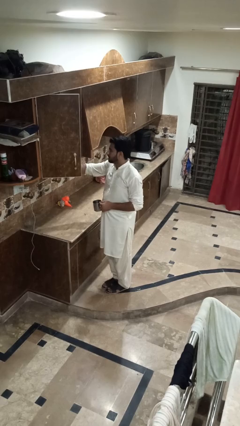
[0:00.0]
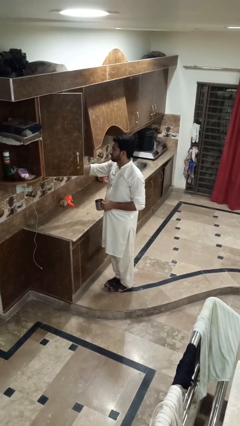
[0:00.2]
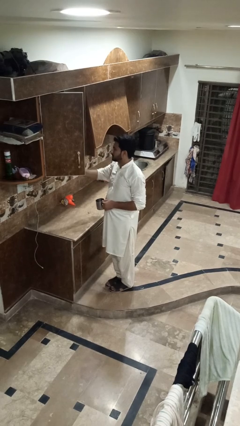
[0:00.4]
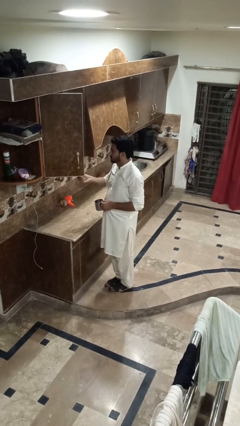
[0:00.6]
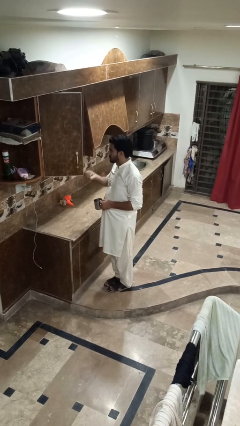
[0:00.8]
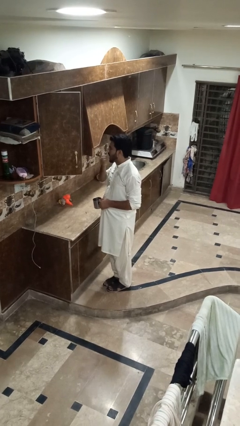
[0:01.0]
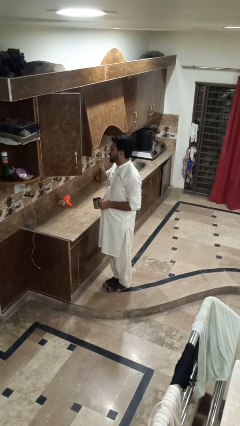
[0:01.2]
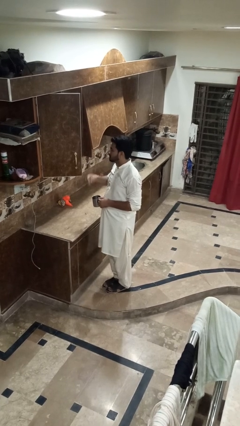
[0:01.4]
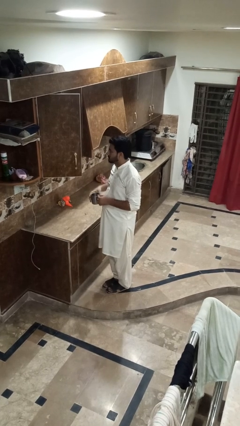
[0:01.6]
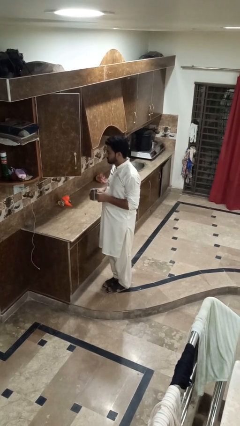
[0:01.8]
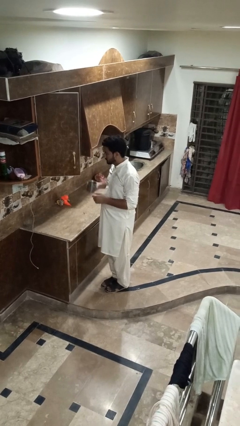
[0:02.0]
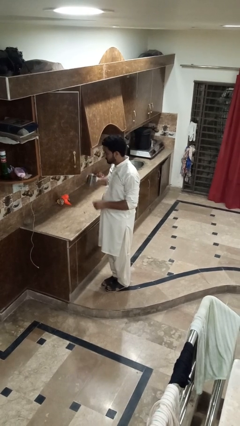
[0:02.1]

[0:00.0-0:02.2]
person takes medicine pills

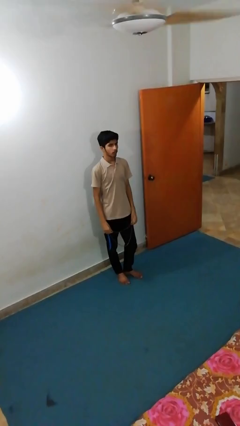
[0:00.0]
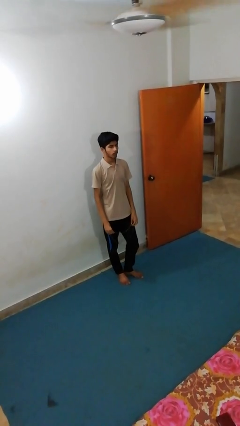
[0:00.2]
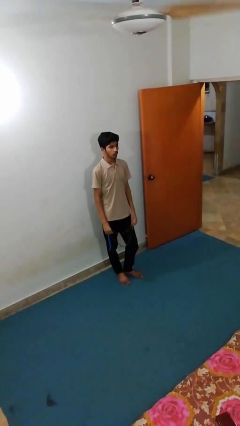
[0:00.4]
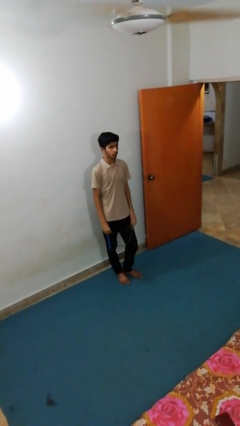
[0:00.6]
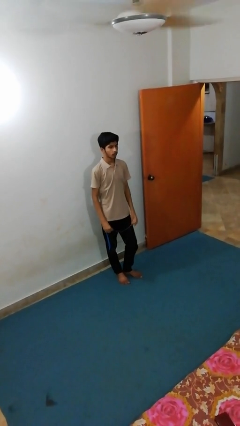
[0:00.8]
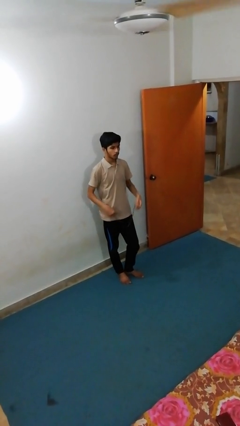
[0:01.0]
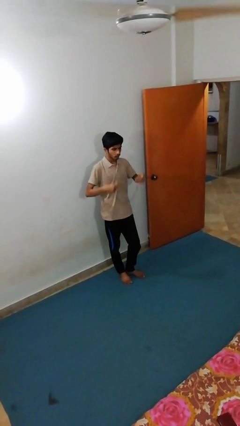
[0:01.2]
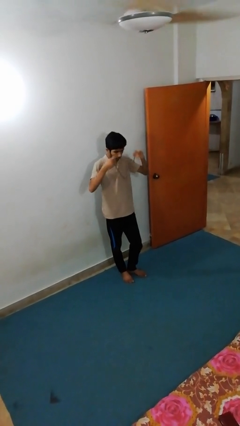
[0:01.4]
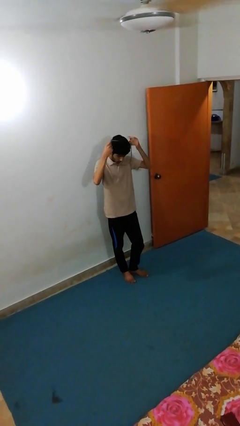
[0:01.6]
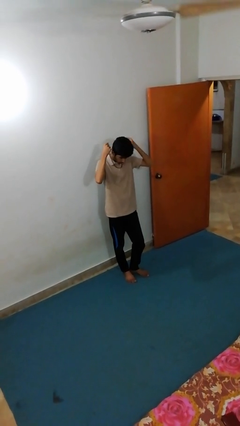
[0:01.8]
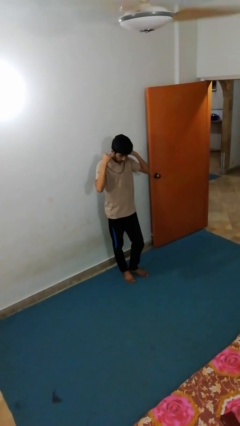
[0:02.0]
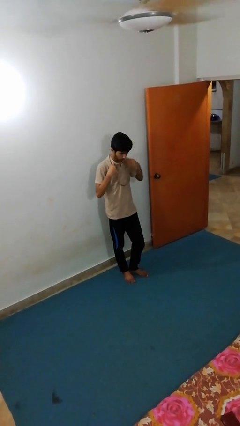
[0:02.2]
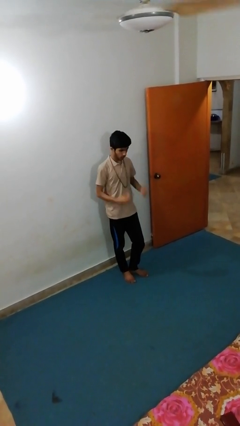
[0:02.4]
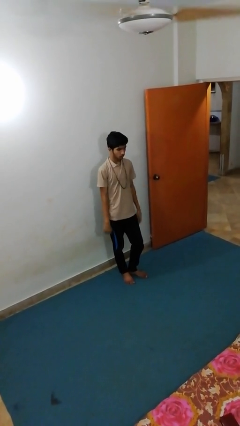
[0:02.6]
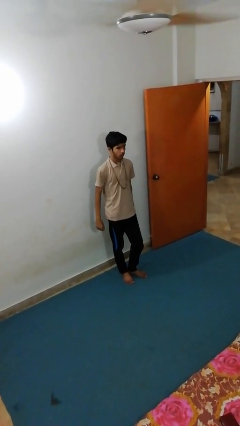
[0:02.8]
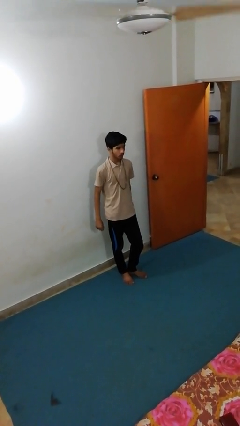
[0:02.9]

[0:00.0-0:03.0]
person puts on necklace

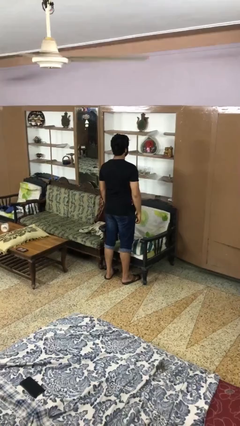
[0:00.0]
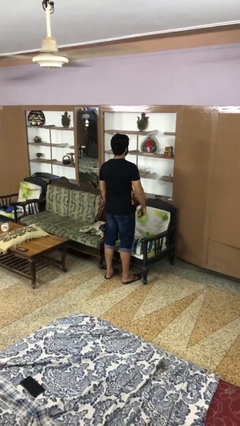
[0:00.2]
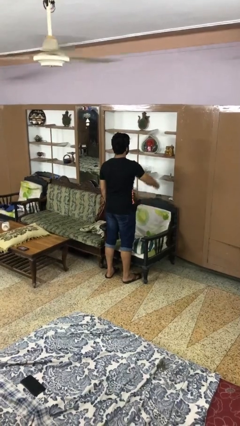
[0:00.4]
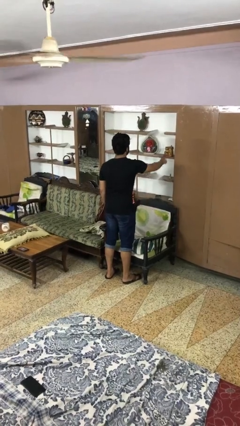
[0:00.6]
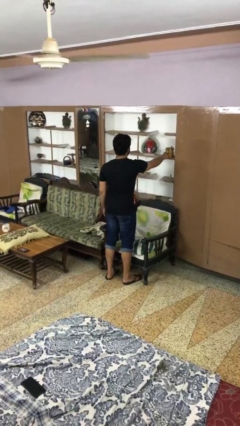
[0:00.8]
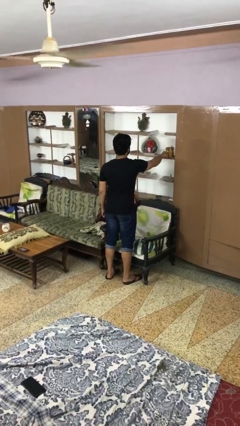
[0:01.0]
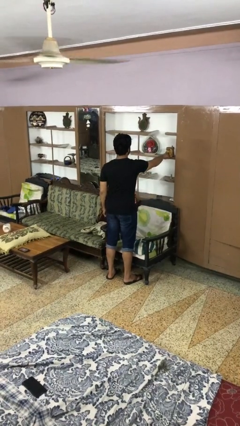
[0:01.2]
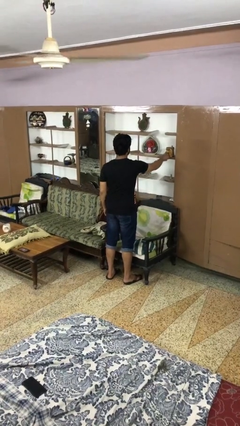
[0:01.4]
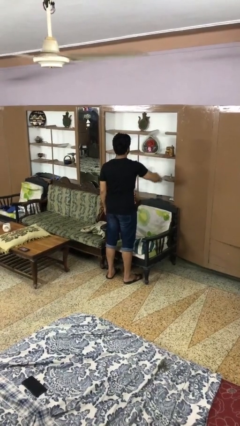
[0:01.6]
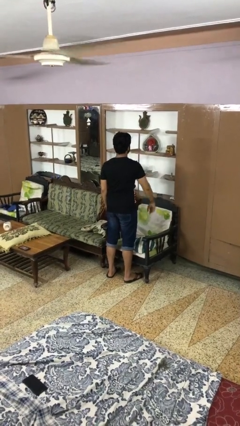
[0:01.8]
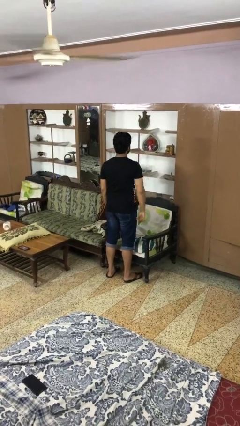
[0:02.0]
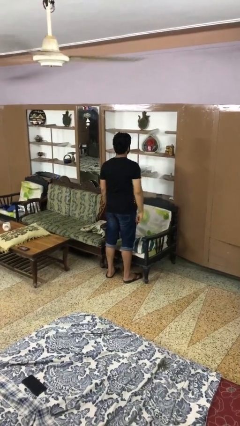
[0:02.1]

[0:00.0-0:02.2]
person taps object with finger

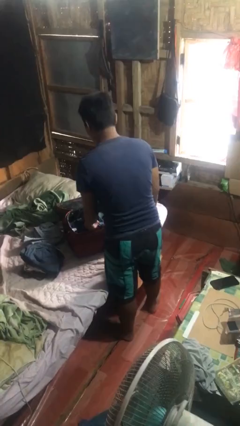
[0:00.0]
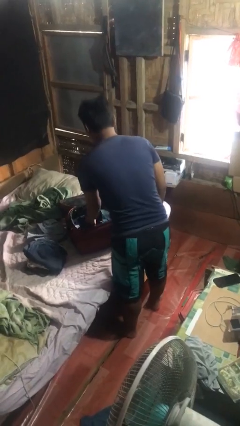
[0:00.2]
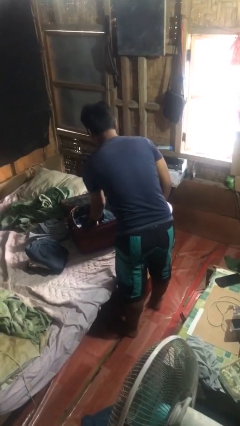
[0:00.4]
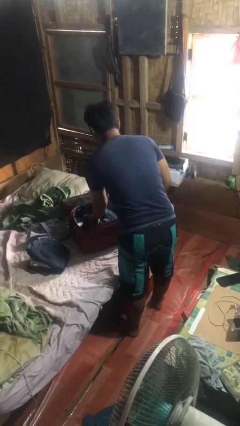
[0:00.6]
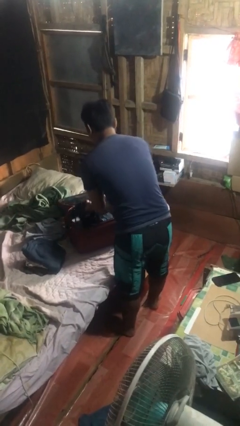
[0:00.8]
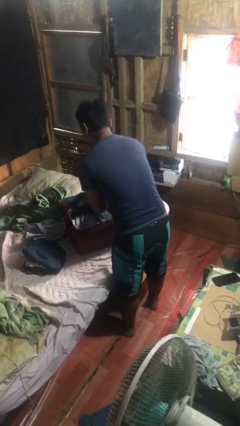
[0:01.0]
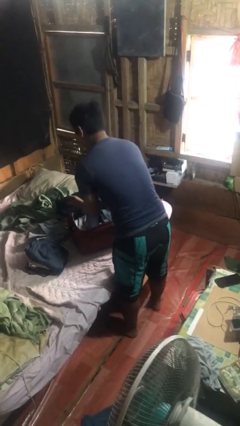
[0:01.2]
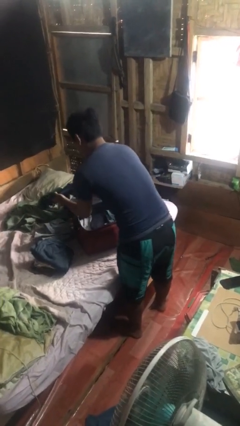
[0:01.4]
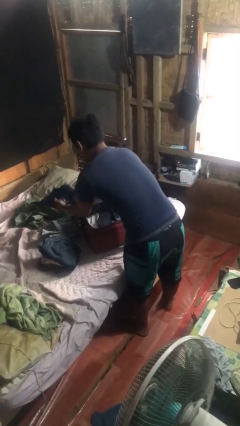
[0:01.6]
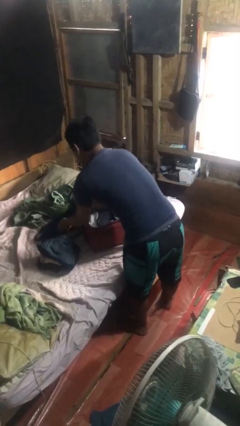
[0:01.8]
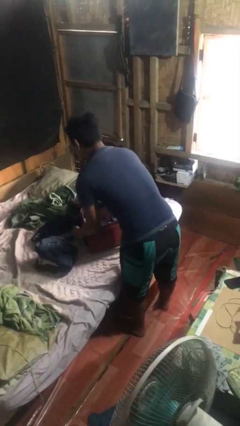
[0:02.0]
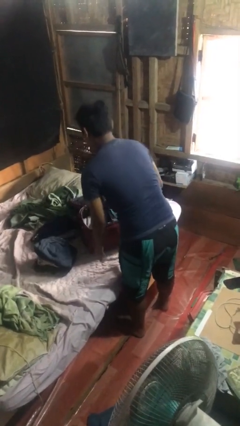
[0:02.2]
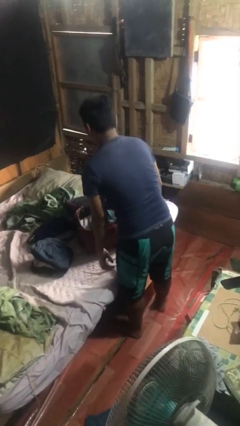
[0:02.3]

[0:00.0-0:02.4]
person unloads clothes from suitcase

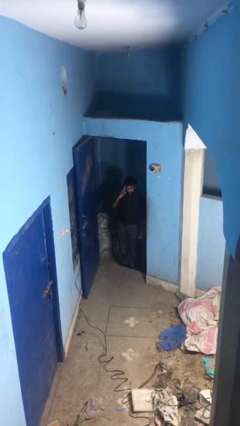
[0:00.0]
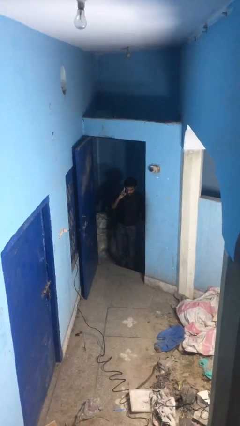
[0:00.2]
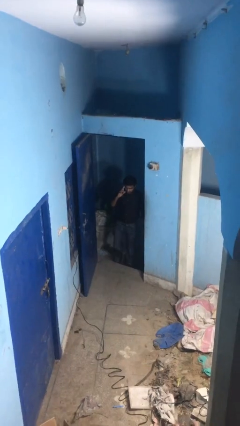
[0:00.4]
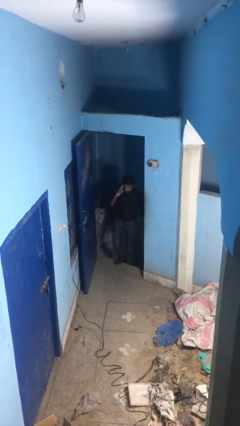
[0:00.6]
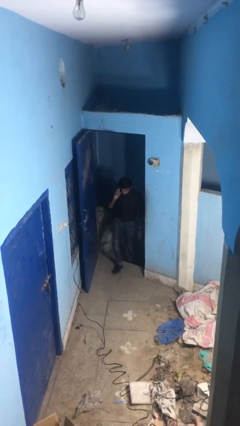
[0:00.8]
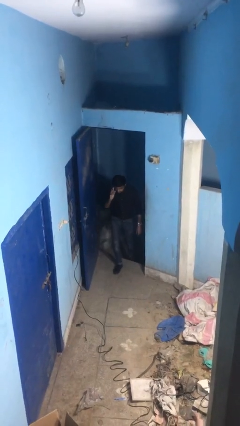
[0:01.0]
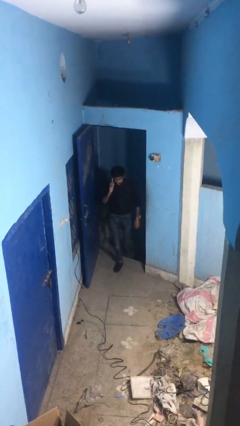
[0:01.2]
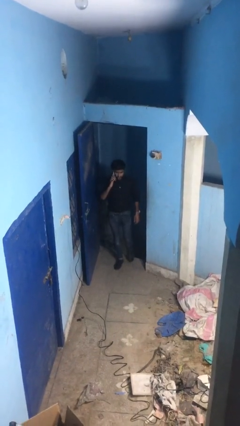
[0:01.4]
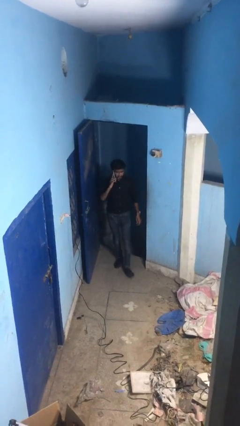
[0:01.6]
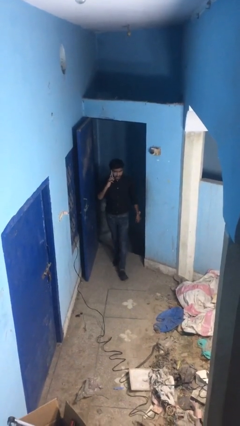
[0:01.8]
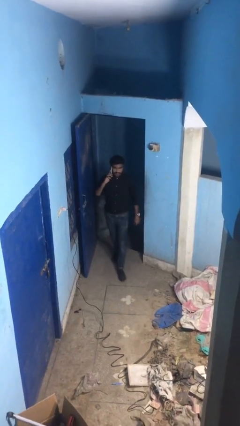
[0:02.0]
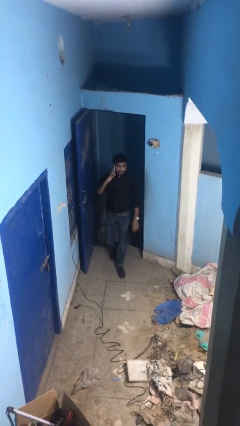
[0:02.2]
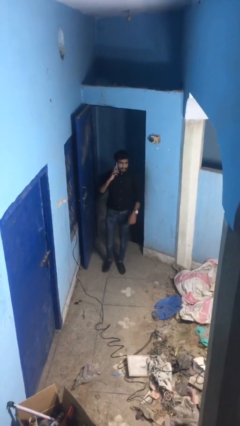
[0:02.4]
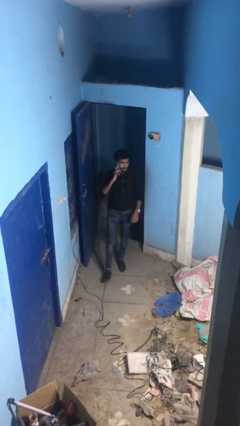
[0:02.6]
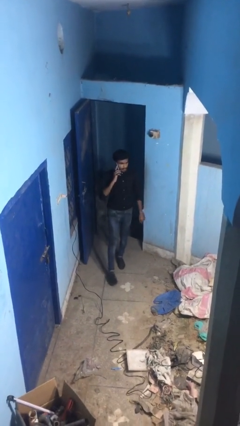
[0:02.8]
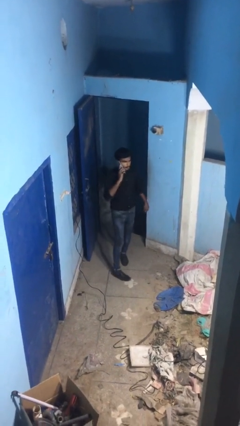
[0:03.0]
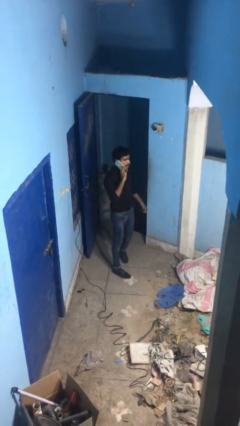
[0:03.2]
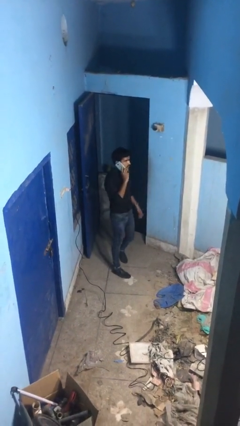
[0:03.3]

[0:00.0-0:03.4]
person enters scene through structure

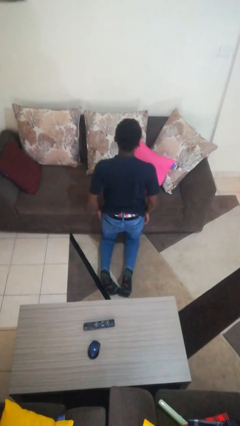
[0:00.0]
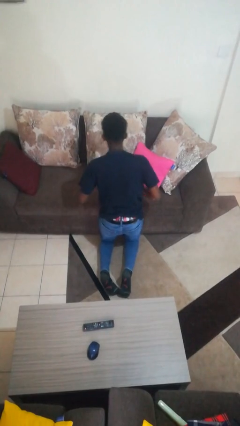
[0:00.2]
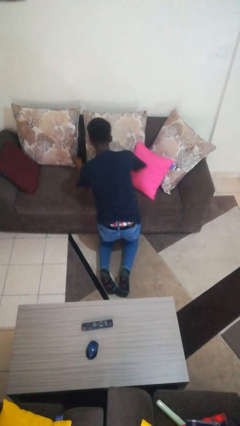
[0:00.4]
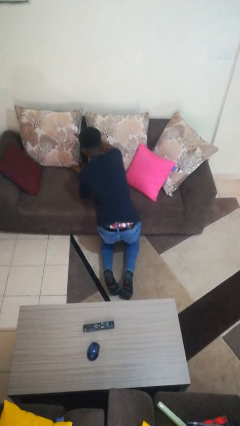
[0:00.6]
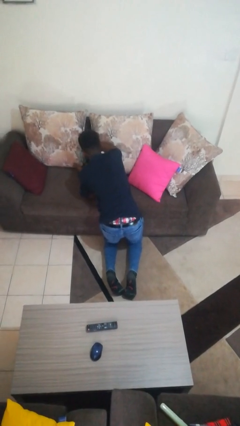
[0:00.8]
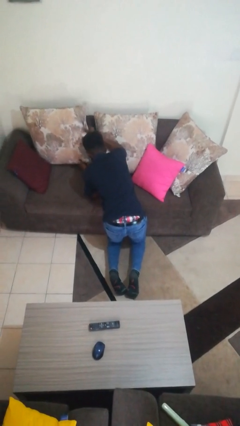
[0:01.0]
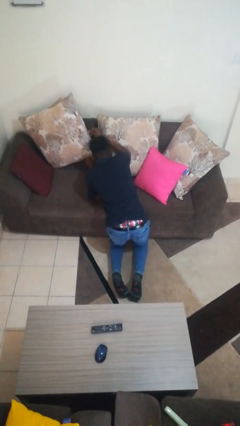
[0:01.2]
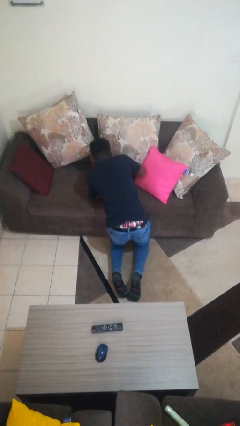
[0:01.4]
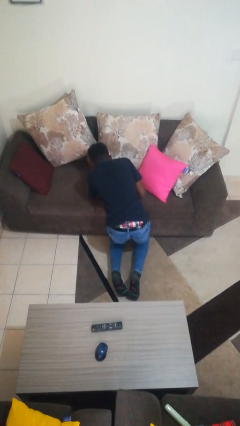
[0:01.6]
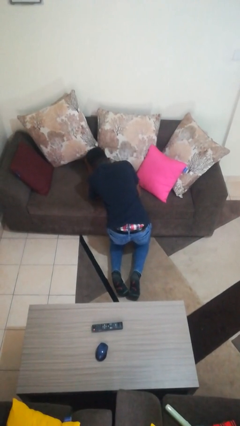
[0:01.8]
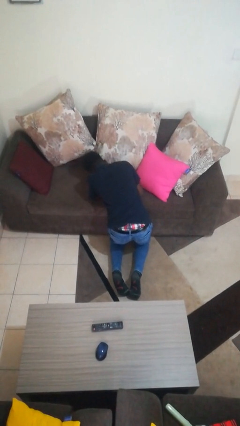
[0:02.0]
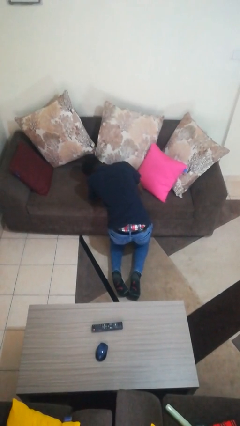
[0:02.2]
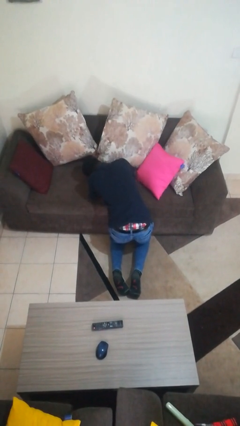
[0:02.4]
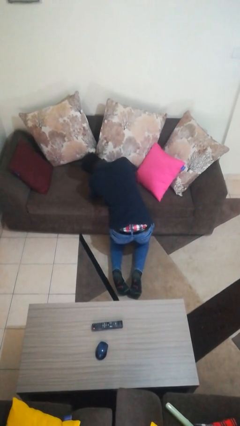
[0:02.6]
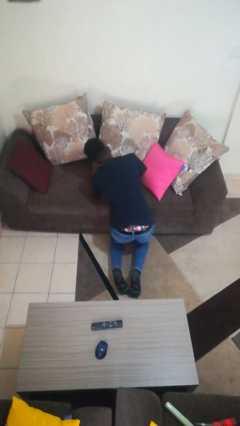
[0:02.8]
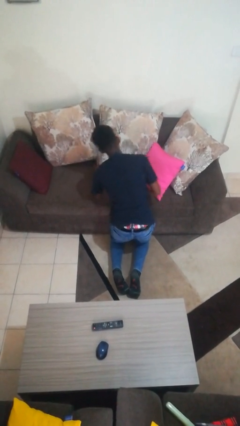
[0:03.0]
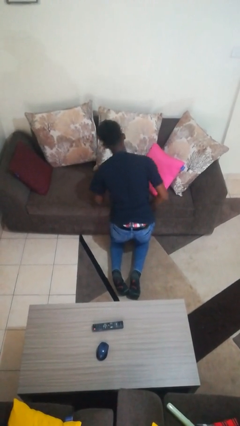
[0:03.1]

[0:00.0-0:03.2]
person searches in couch

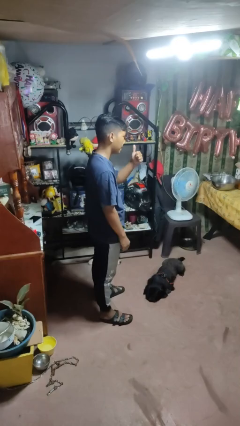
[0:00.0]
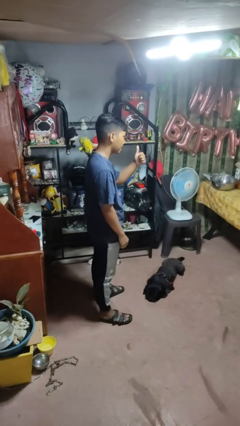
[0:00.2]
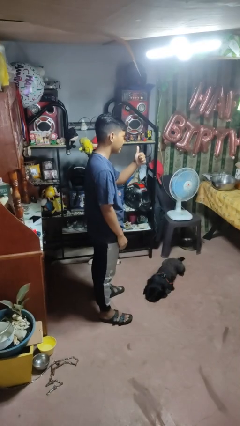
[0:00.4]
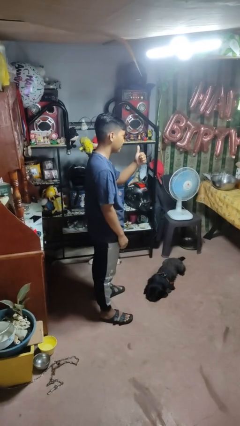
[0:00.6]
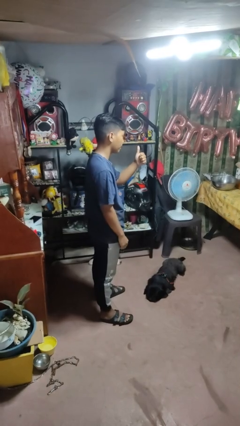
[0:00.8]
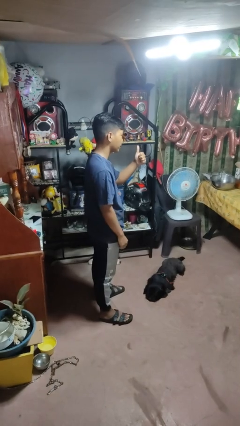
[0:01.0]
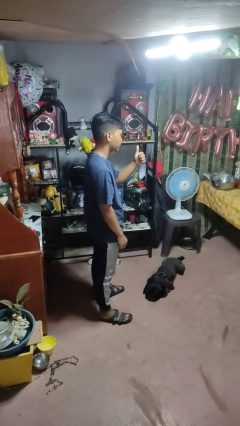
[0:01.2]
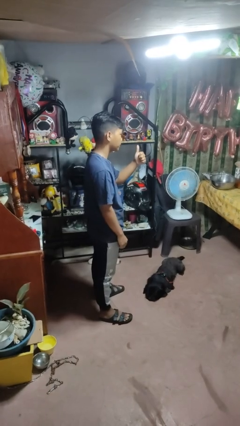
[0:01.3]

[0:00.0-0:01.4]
person gestures thumbs up
